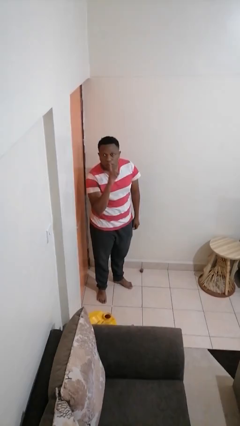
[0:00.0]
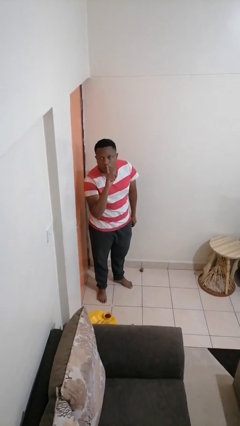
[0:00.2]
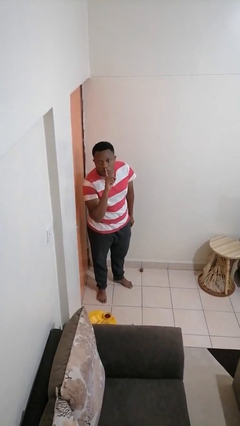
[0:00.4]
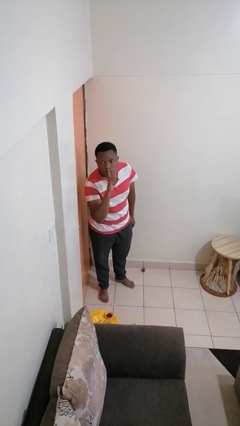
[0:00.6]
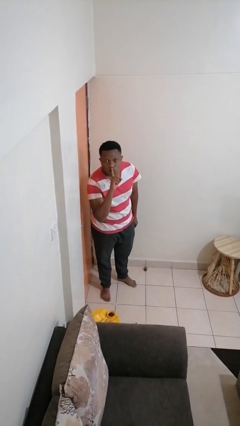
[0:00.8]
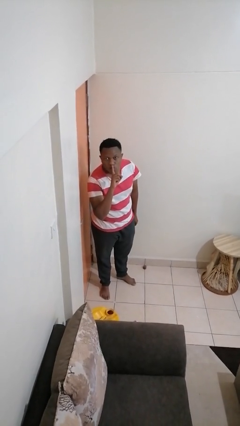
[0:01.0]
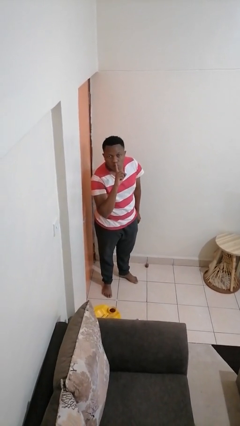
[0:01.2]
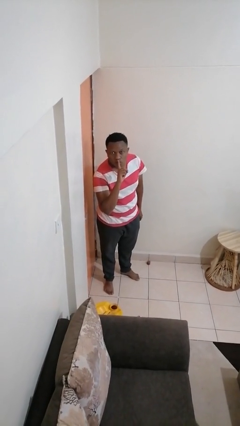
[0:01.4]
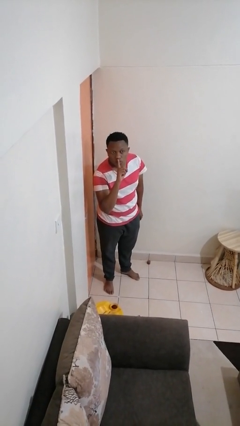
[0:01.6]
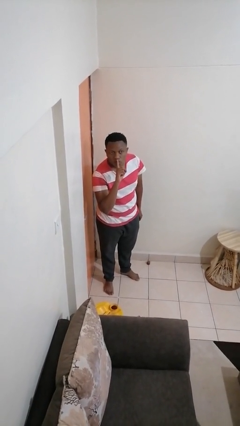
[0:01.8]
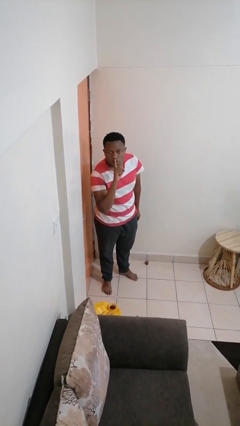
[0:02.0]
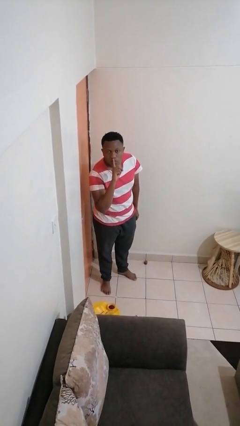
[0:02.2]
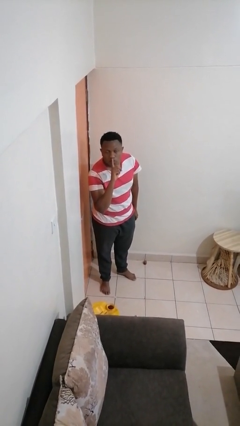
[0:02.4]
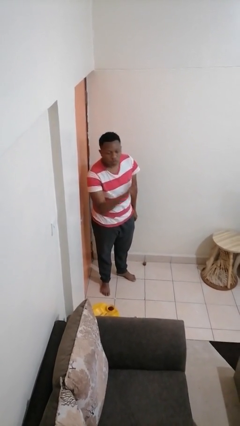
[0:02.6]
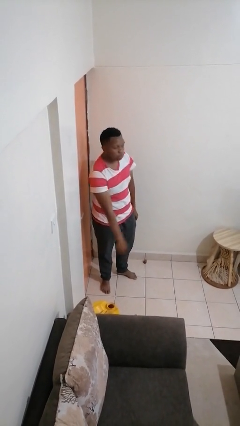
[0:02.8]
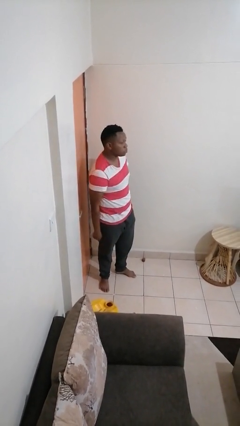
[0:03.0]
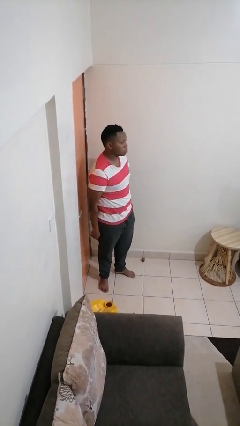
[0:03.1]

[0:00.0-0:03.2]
person gestures be quiet

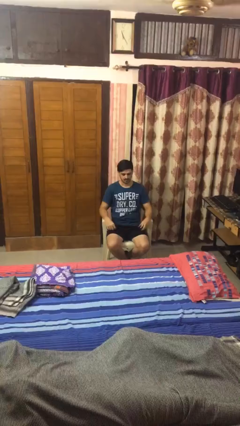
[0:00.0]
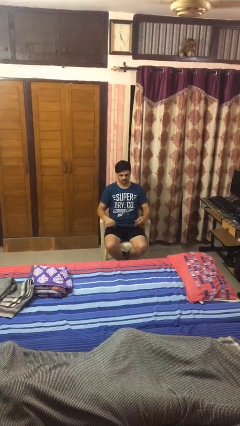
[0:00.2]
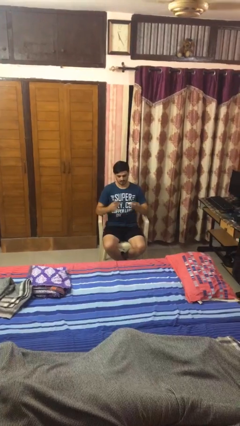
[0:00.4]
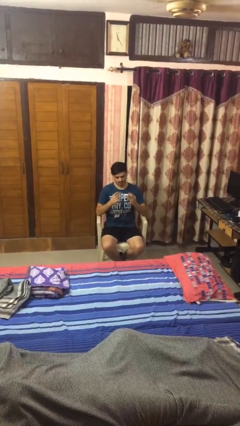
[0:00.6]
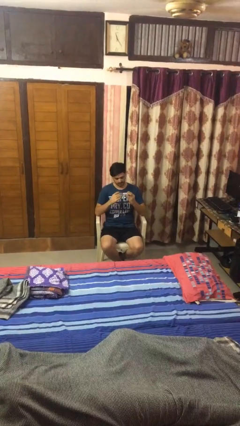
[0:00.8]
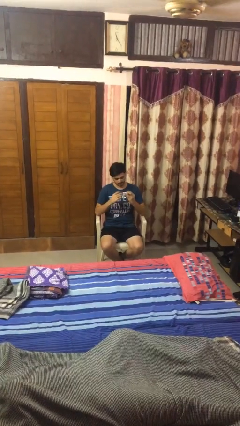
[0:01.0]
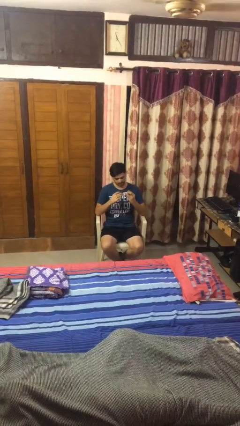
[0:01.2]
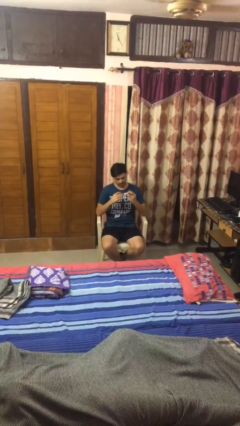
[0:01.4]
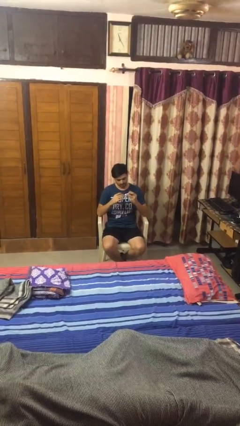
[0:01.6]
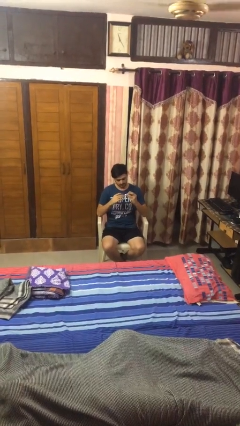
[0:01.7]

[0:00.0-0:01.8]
person clips fingernails

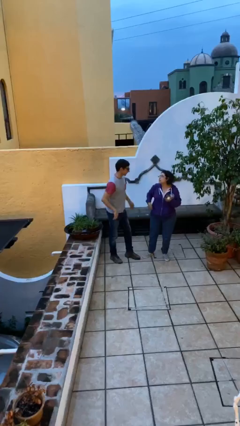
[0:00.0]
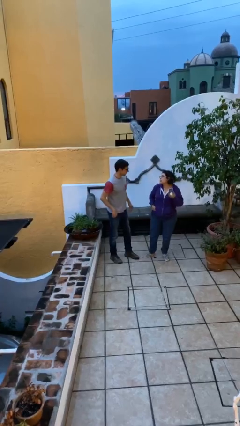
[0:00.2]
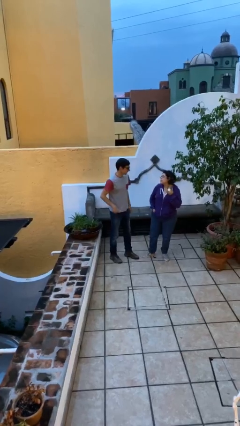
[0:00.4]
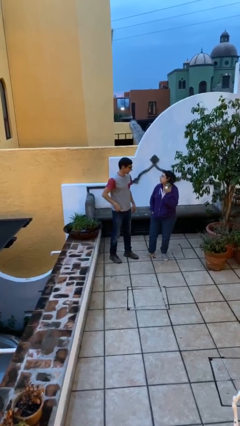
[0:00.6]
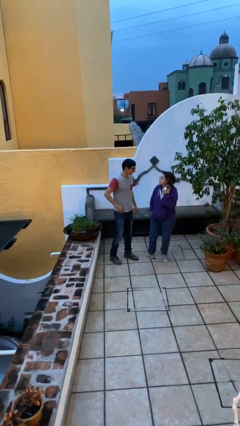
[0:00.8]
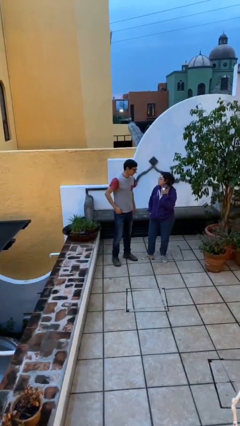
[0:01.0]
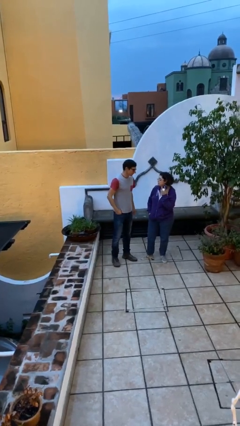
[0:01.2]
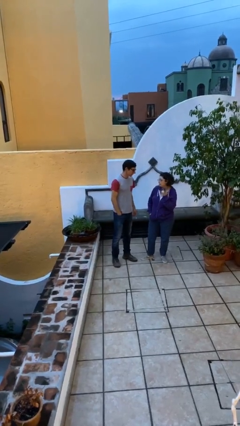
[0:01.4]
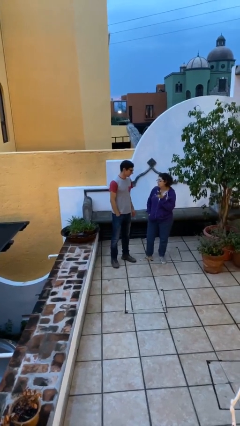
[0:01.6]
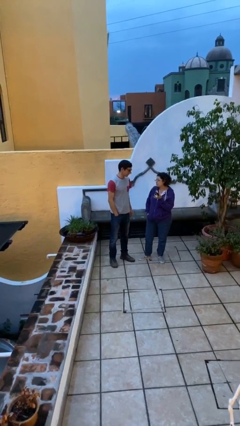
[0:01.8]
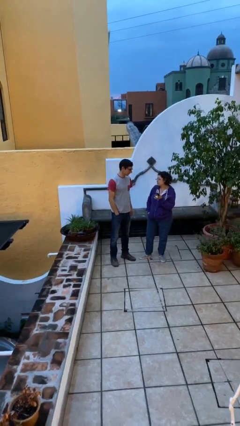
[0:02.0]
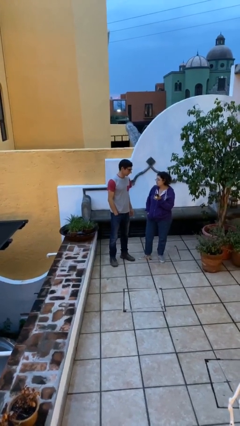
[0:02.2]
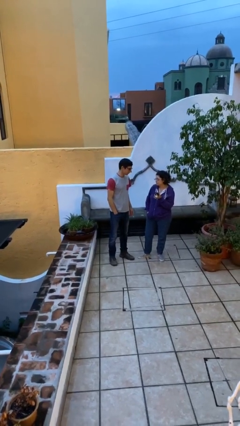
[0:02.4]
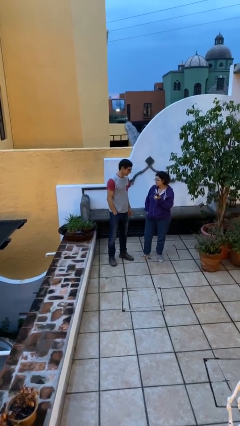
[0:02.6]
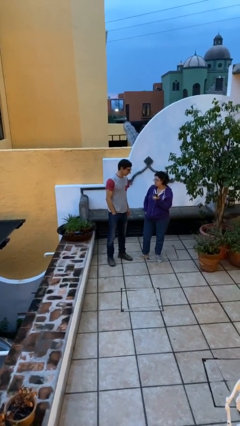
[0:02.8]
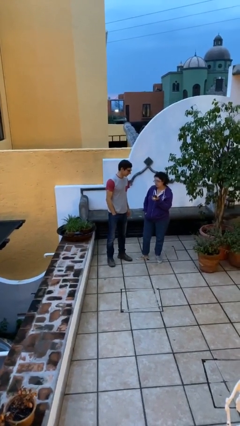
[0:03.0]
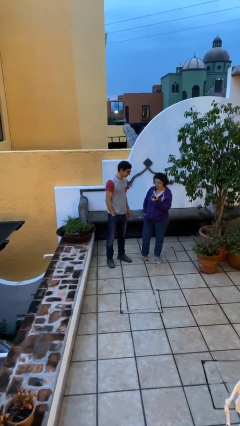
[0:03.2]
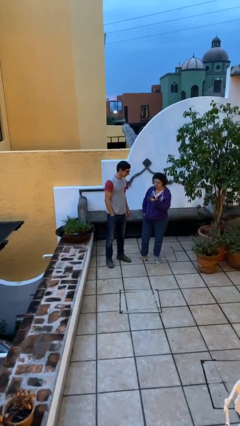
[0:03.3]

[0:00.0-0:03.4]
person talks to person

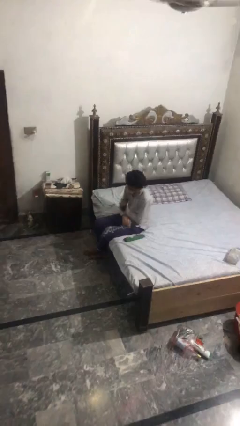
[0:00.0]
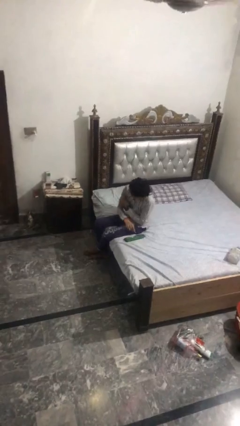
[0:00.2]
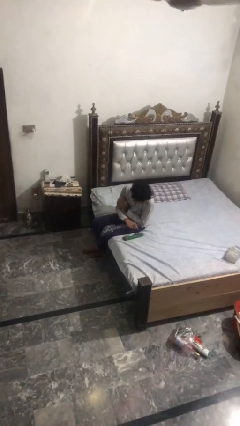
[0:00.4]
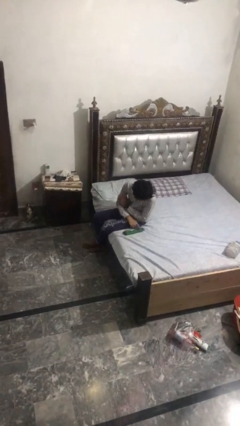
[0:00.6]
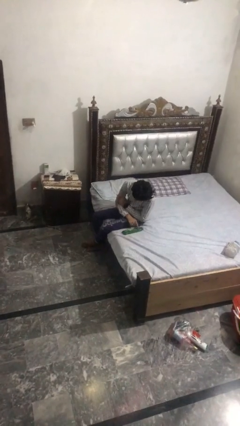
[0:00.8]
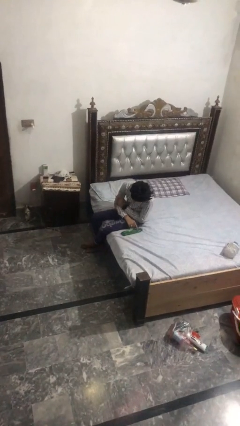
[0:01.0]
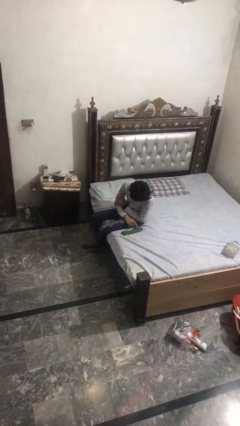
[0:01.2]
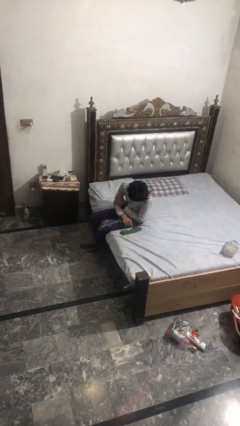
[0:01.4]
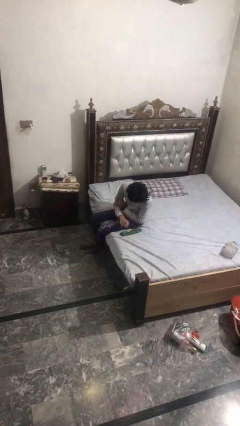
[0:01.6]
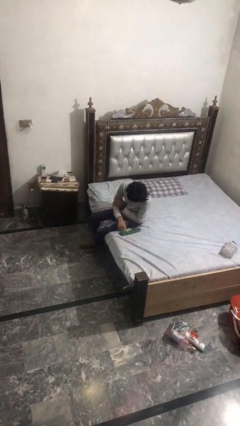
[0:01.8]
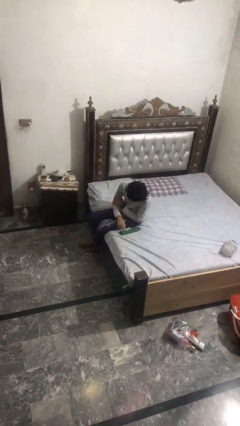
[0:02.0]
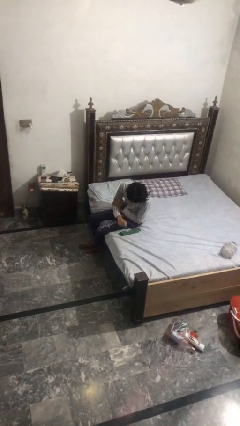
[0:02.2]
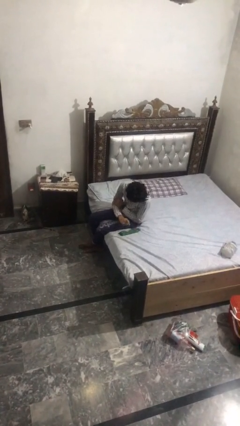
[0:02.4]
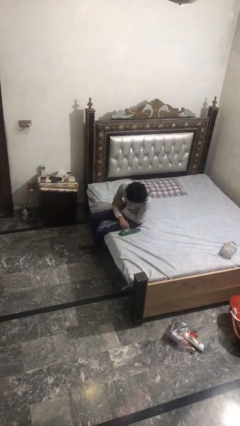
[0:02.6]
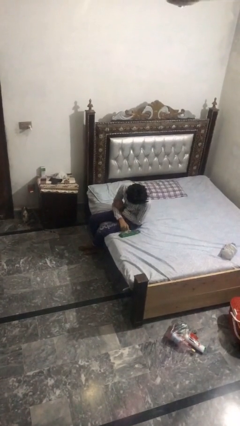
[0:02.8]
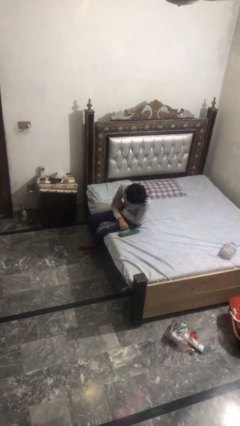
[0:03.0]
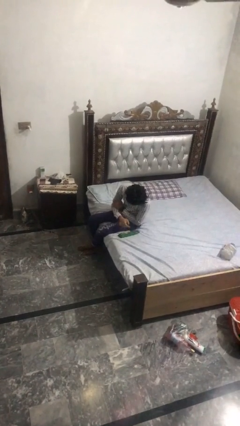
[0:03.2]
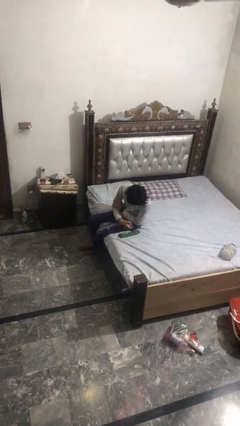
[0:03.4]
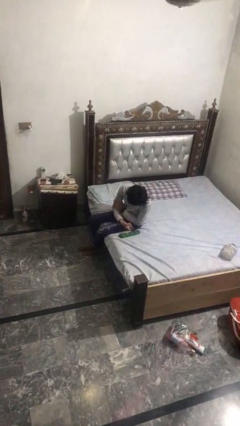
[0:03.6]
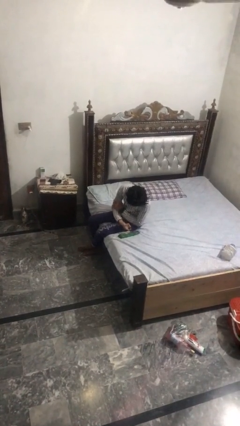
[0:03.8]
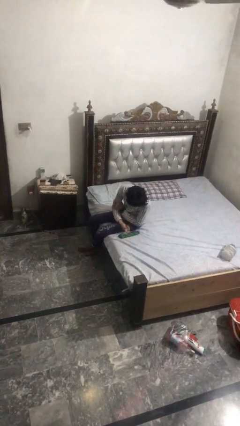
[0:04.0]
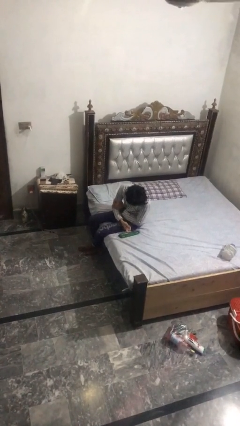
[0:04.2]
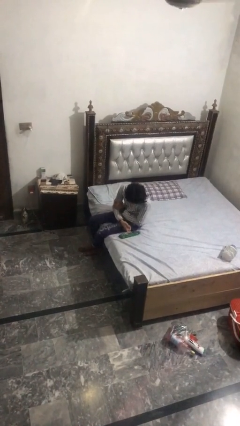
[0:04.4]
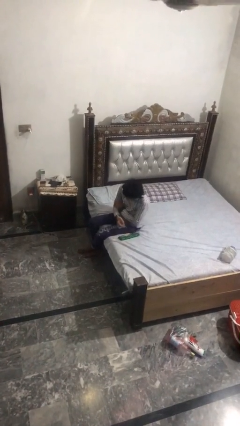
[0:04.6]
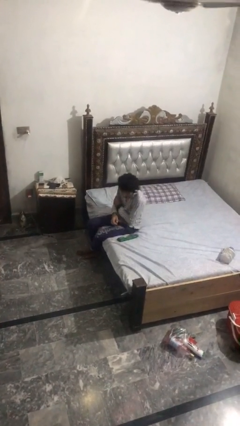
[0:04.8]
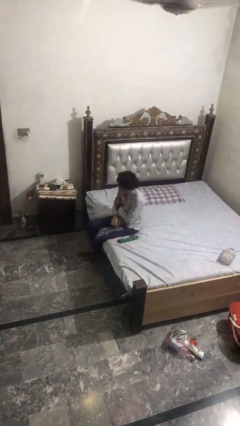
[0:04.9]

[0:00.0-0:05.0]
person taps object with finger

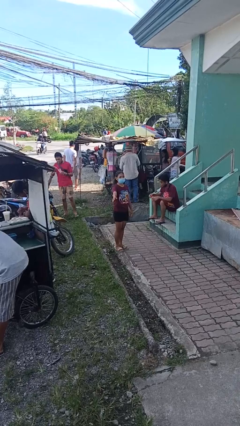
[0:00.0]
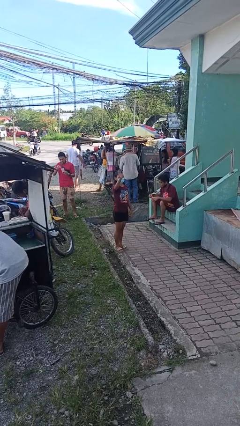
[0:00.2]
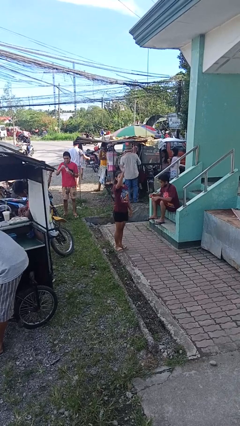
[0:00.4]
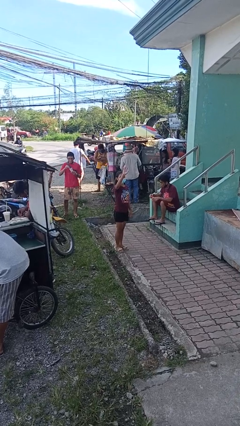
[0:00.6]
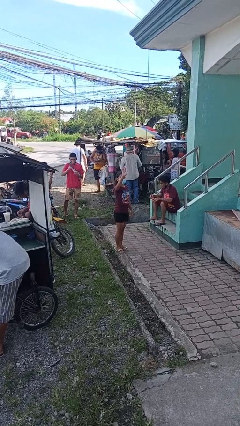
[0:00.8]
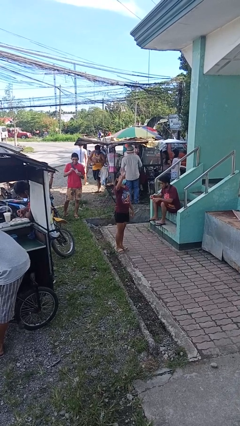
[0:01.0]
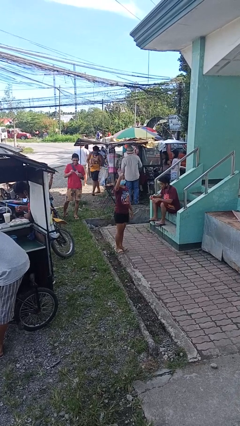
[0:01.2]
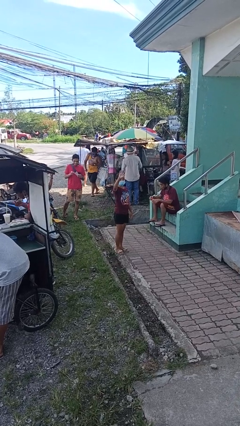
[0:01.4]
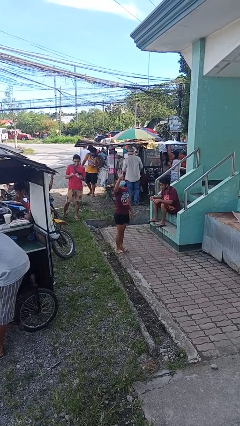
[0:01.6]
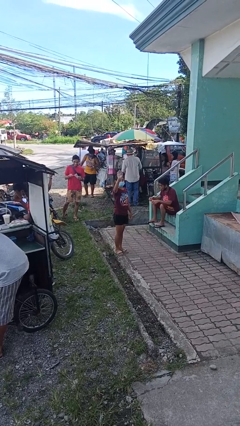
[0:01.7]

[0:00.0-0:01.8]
person waves at person

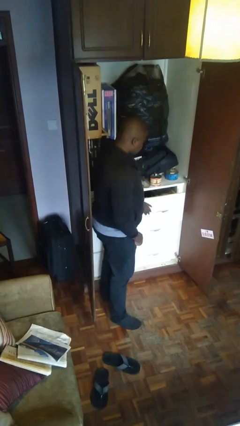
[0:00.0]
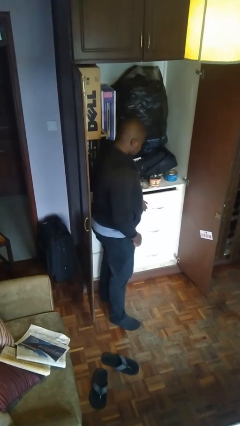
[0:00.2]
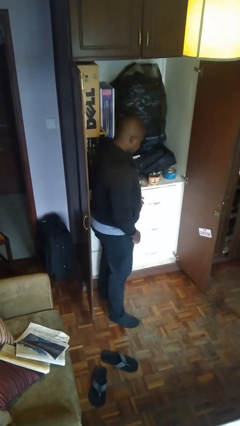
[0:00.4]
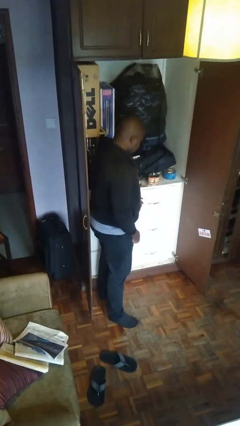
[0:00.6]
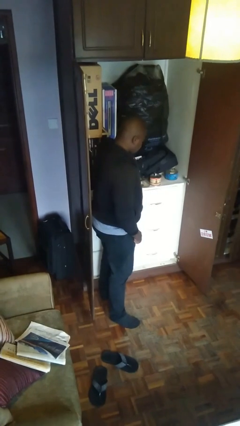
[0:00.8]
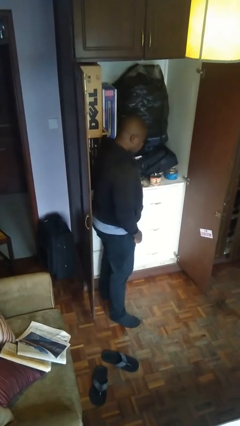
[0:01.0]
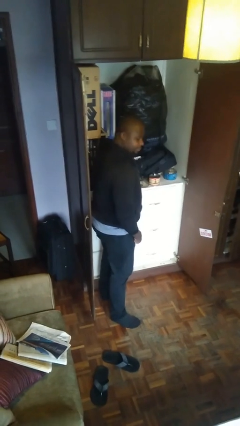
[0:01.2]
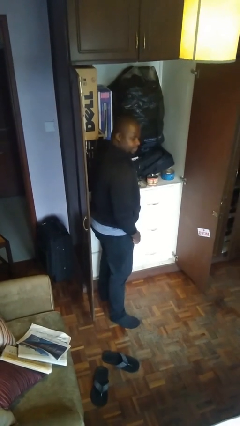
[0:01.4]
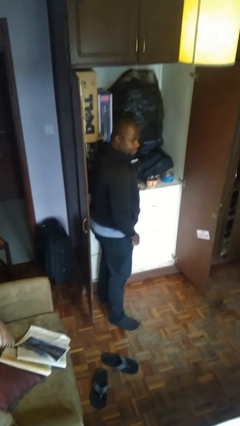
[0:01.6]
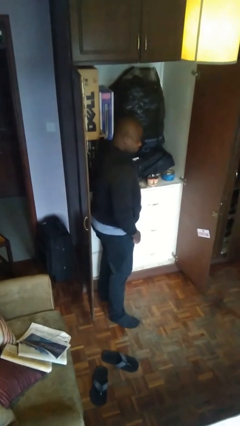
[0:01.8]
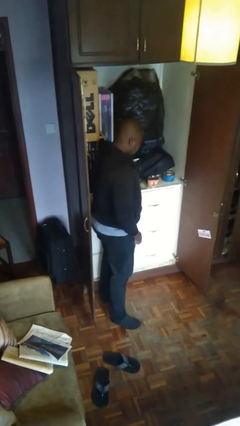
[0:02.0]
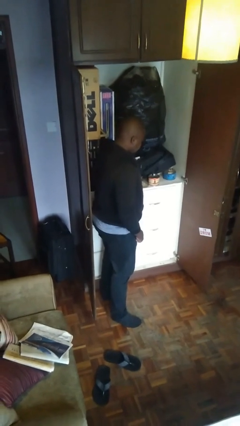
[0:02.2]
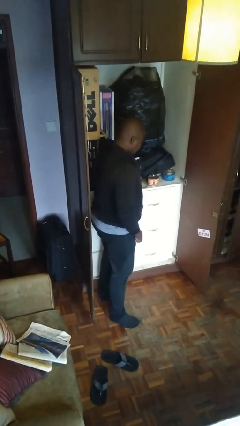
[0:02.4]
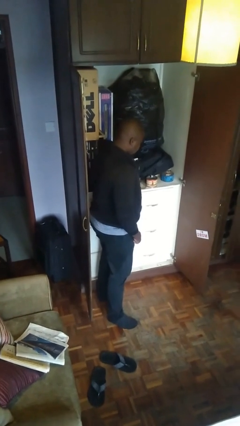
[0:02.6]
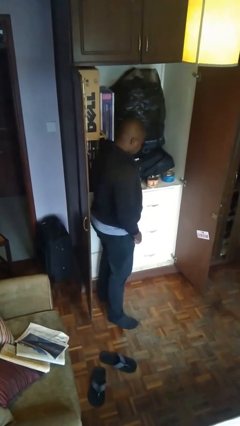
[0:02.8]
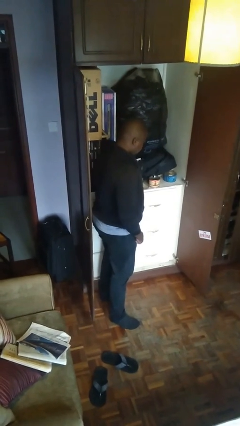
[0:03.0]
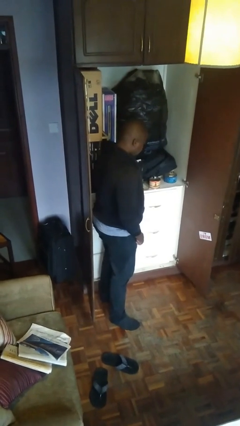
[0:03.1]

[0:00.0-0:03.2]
person closes dresser drawer
